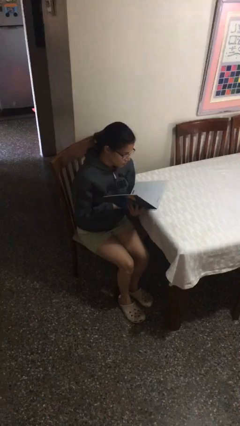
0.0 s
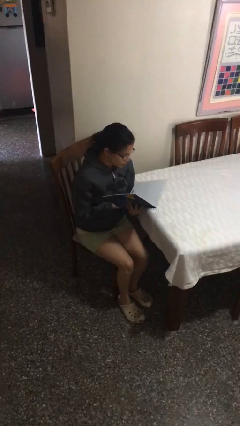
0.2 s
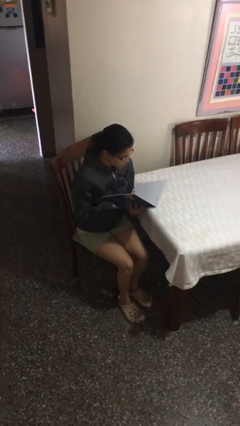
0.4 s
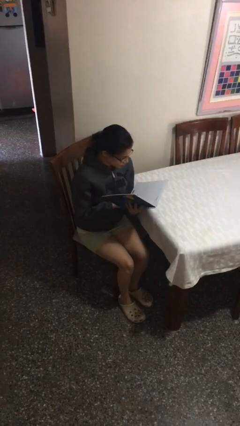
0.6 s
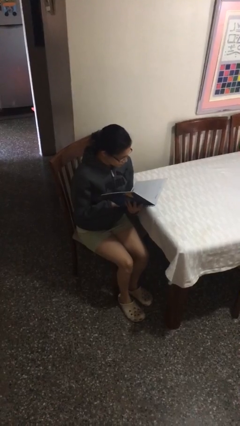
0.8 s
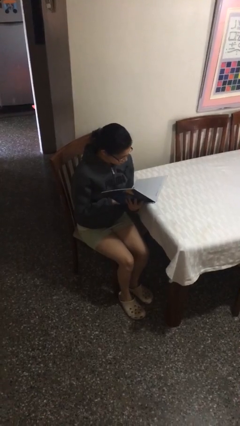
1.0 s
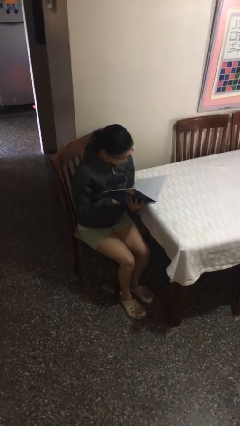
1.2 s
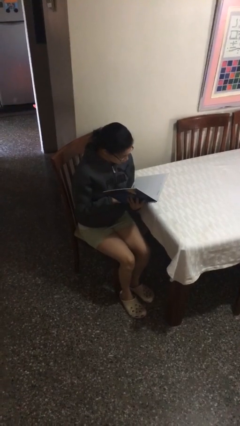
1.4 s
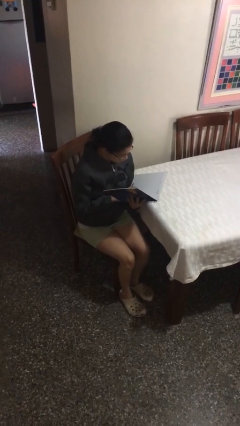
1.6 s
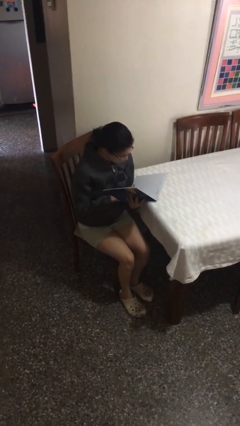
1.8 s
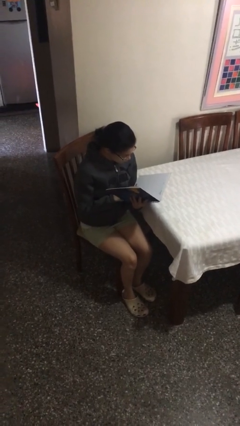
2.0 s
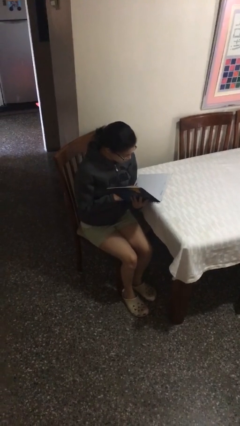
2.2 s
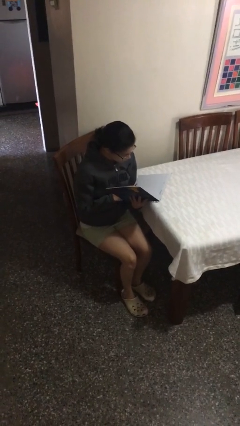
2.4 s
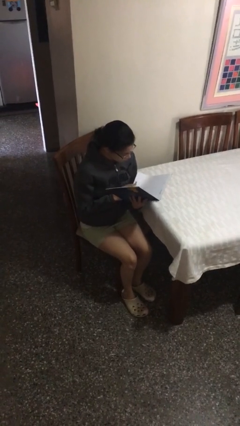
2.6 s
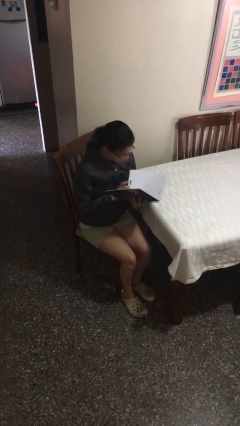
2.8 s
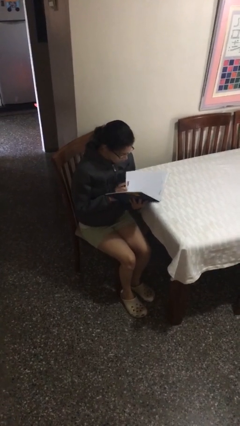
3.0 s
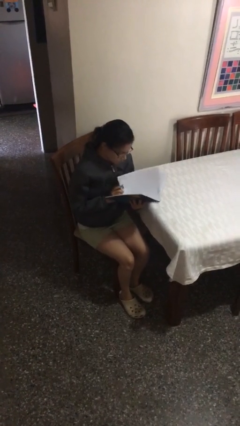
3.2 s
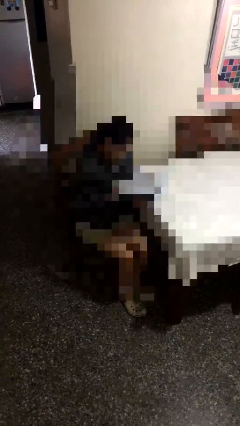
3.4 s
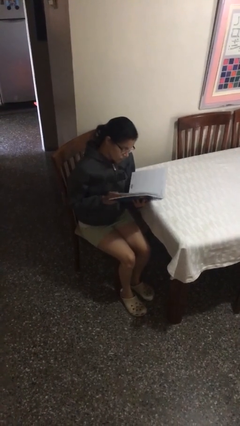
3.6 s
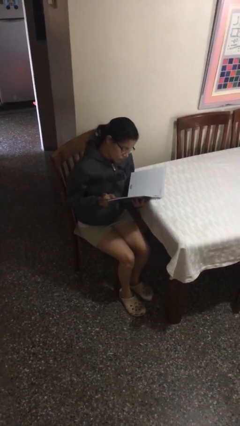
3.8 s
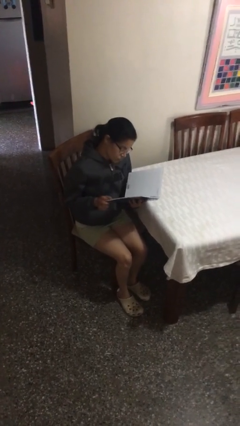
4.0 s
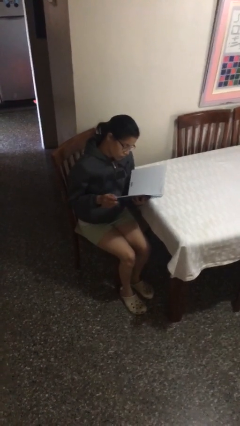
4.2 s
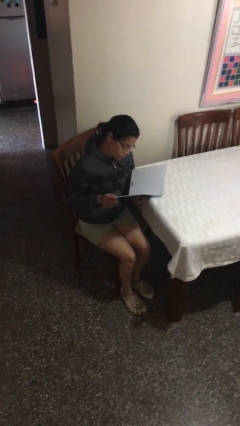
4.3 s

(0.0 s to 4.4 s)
person reads document

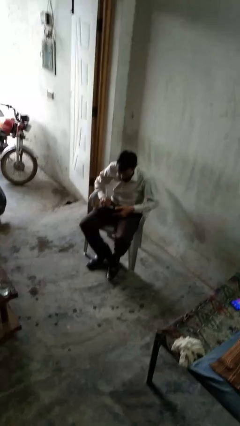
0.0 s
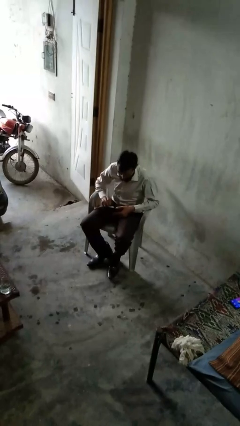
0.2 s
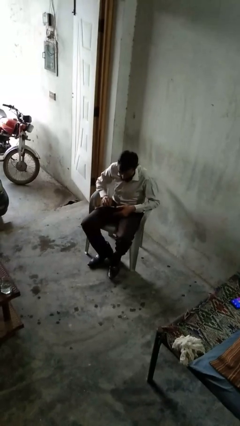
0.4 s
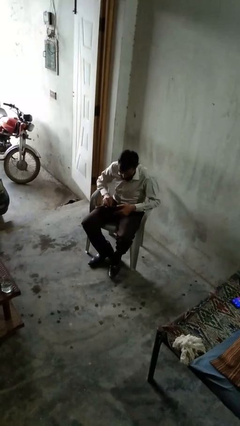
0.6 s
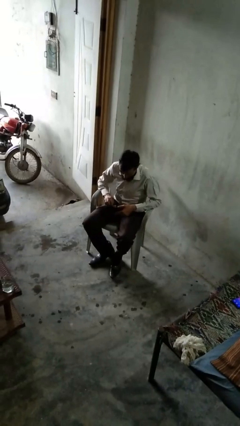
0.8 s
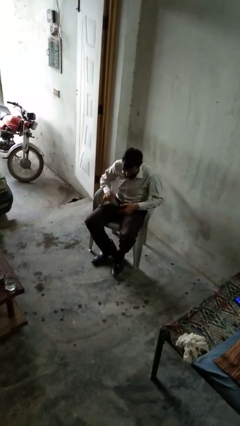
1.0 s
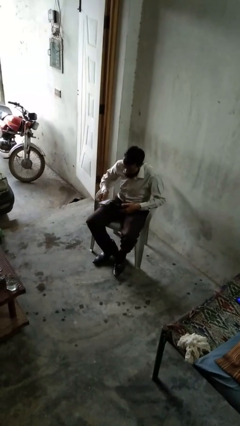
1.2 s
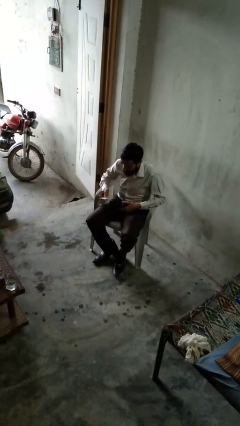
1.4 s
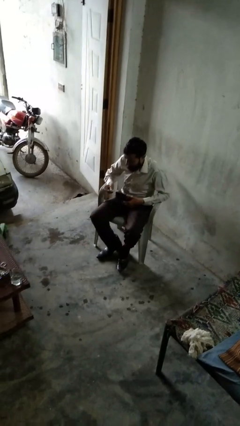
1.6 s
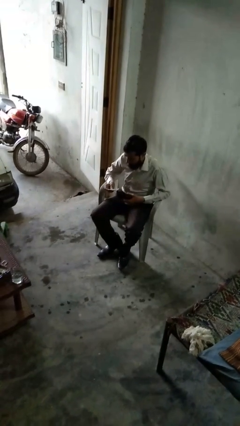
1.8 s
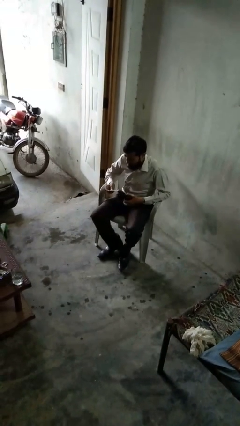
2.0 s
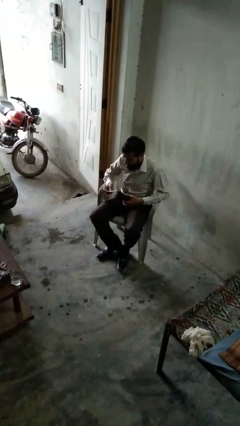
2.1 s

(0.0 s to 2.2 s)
person takes object from purse

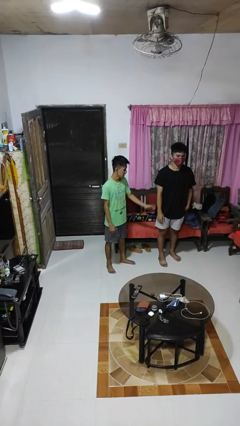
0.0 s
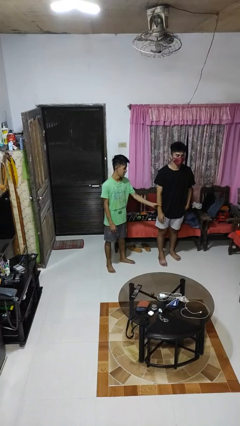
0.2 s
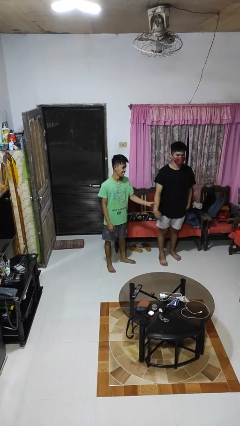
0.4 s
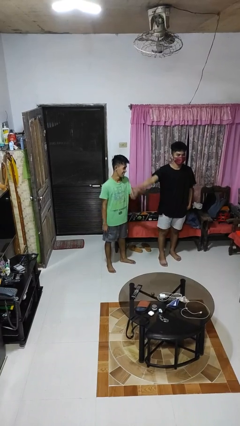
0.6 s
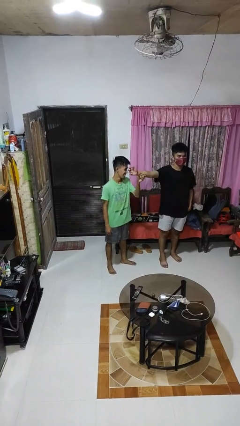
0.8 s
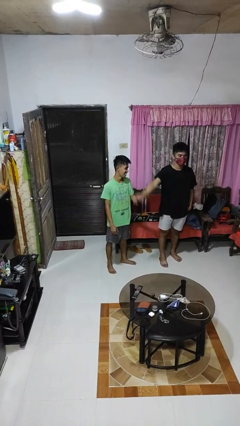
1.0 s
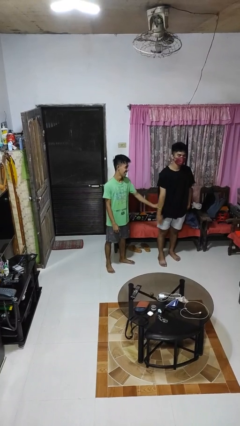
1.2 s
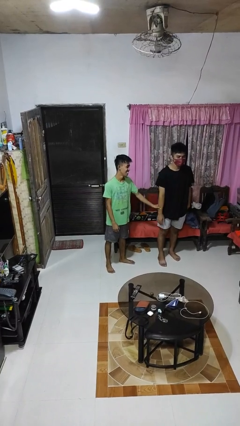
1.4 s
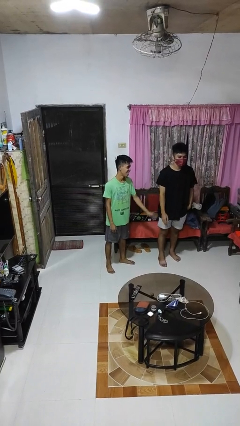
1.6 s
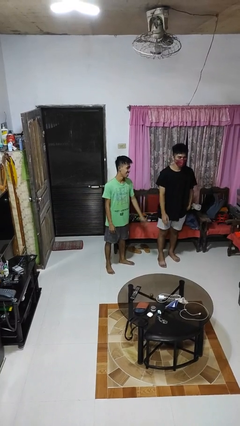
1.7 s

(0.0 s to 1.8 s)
person grabs person by forearm

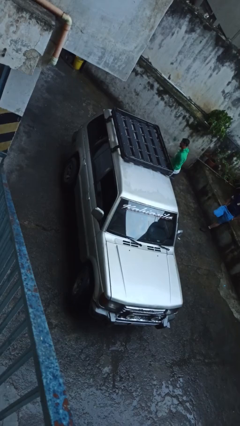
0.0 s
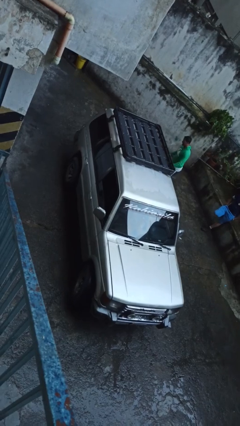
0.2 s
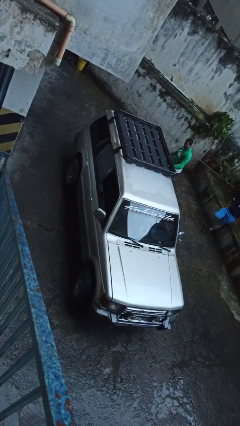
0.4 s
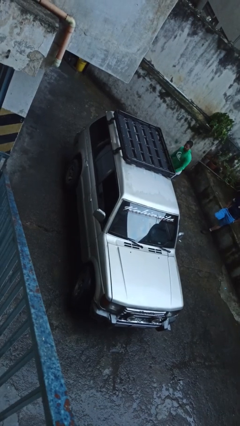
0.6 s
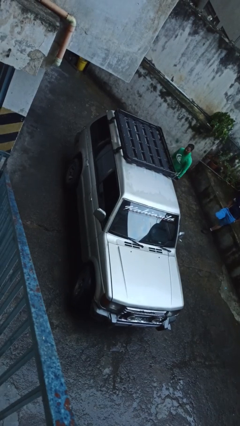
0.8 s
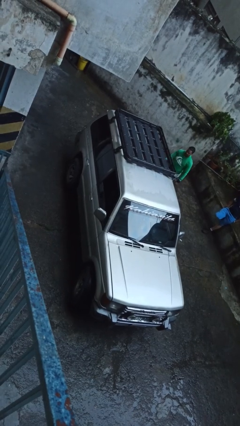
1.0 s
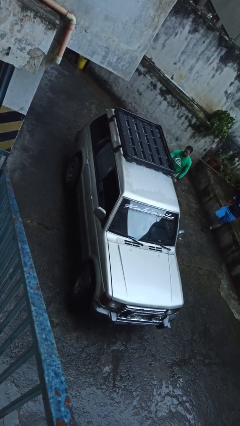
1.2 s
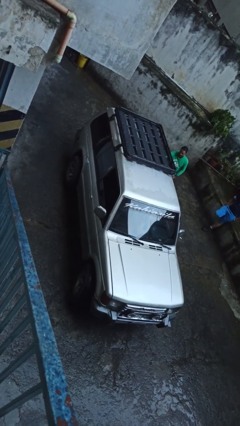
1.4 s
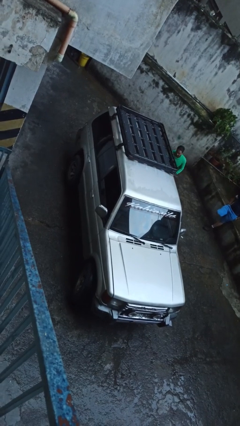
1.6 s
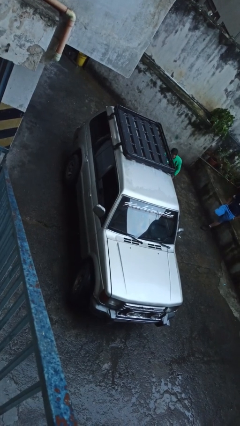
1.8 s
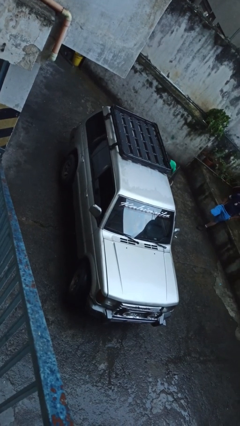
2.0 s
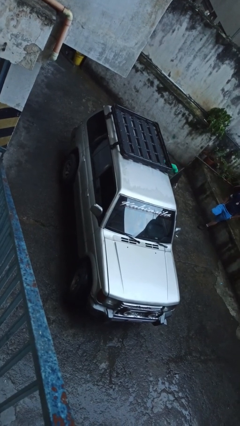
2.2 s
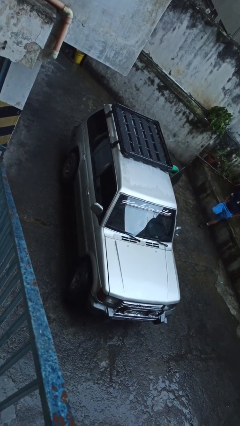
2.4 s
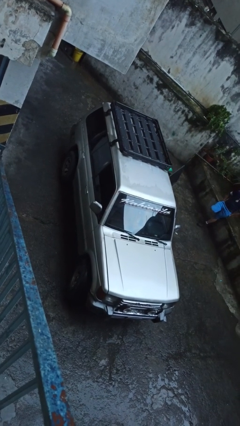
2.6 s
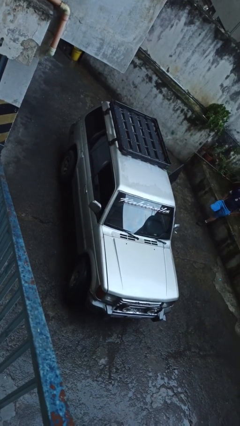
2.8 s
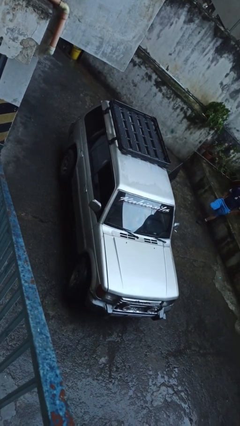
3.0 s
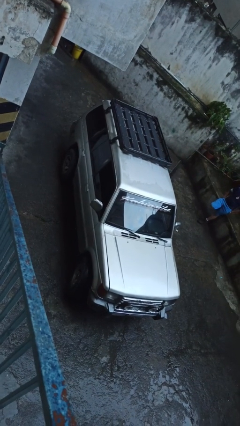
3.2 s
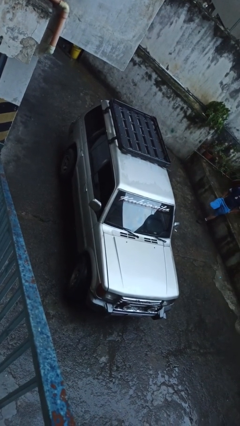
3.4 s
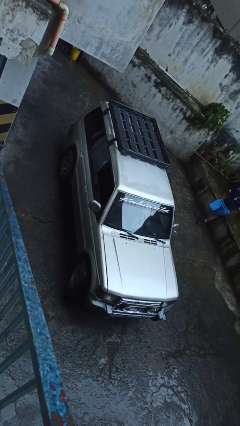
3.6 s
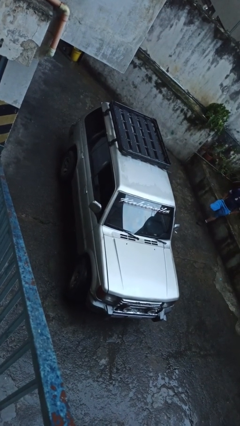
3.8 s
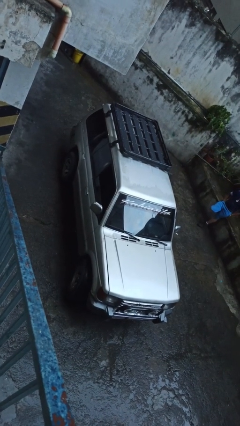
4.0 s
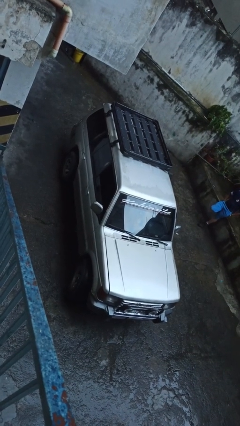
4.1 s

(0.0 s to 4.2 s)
car picks up person

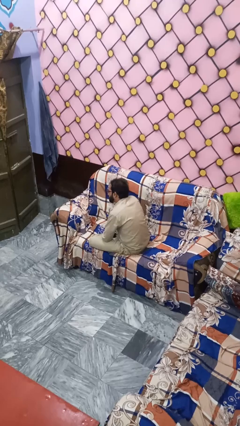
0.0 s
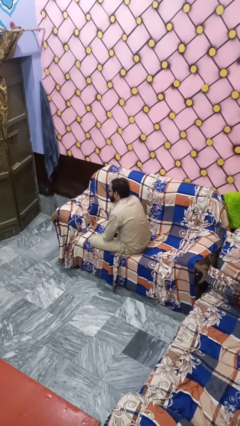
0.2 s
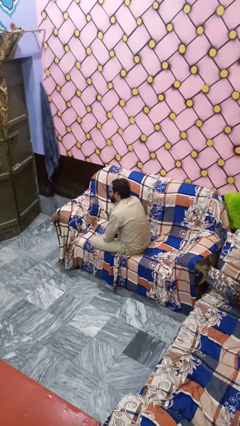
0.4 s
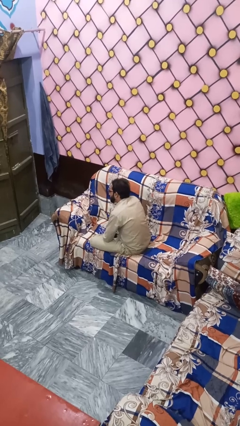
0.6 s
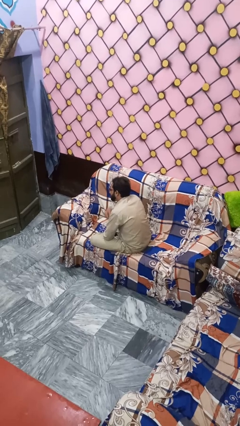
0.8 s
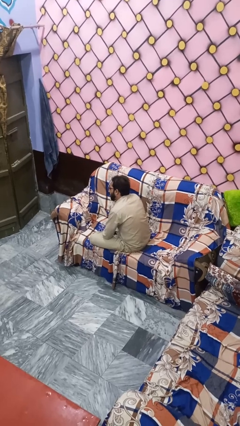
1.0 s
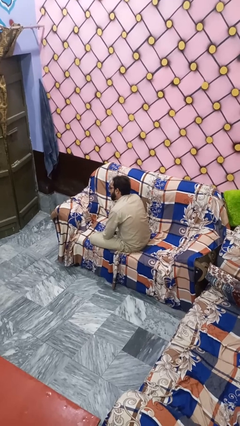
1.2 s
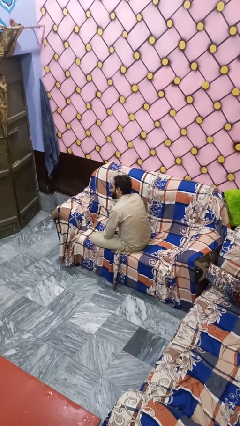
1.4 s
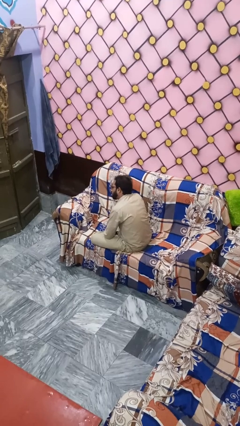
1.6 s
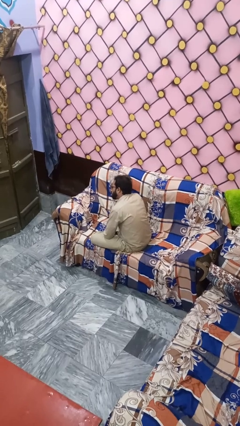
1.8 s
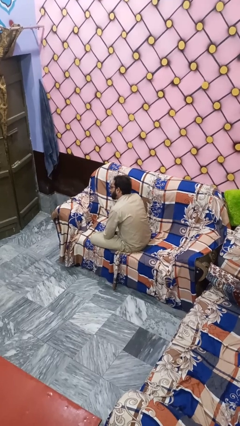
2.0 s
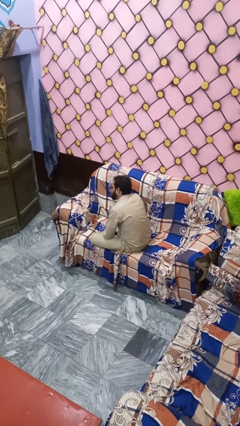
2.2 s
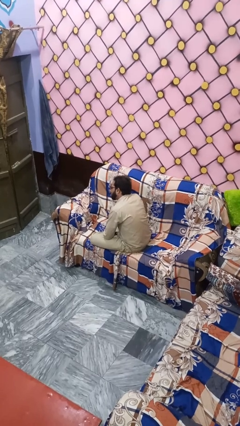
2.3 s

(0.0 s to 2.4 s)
person sticks out tongue

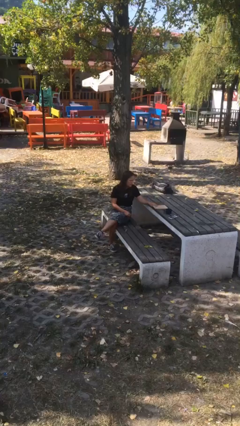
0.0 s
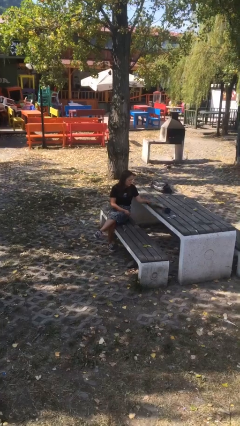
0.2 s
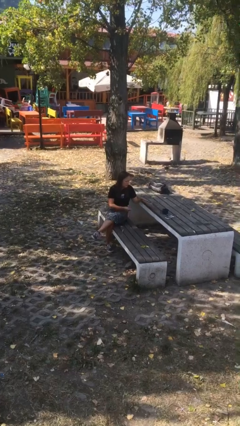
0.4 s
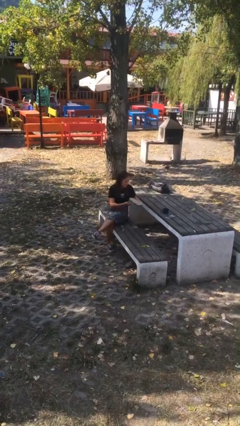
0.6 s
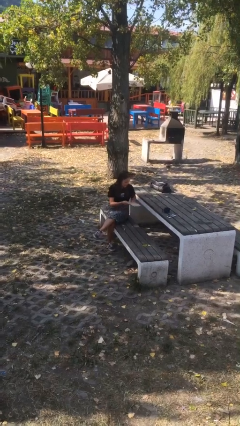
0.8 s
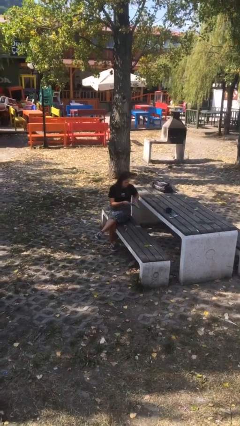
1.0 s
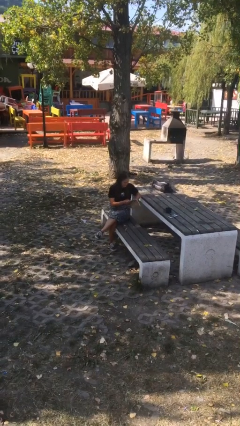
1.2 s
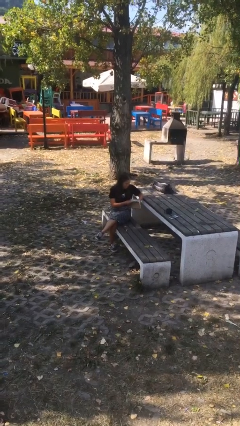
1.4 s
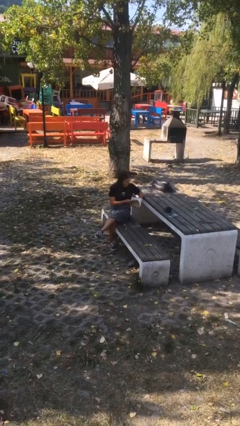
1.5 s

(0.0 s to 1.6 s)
person picks up object from table

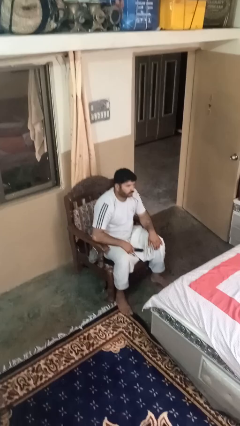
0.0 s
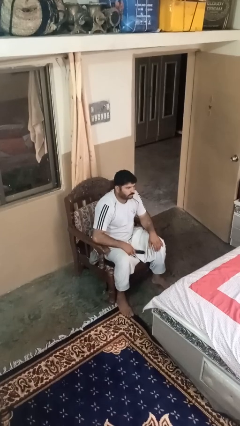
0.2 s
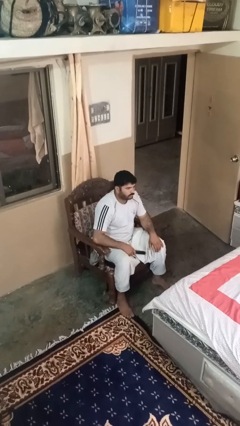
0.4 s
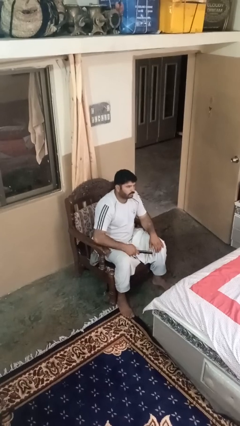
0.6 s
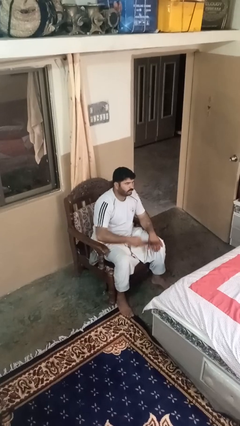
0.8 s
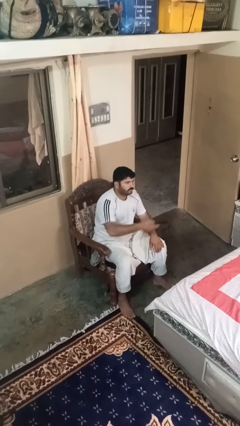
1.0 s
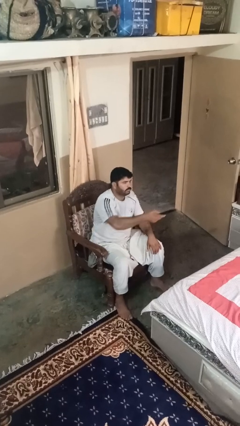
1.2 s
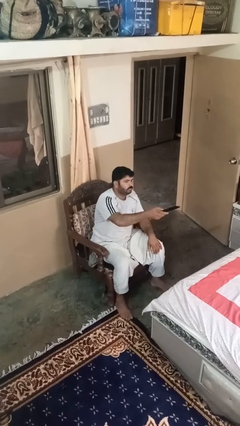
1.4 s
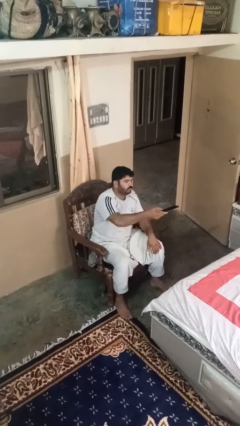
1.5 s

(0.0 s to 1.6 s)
person uses television remote
